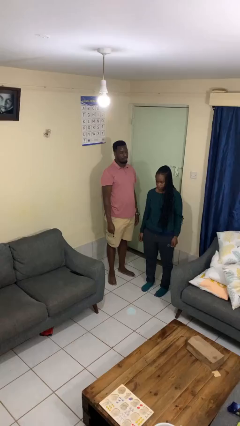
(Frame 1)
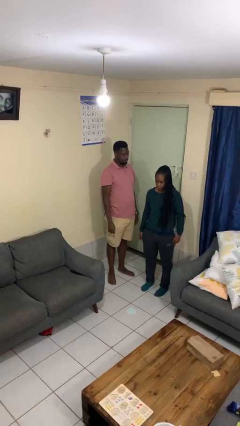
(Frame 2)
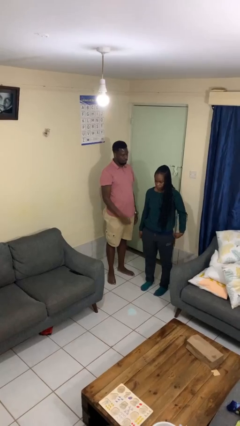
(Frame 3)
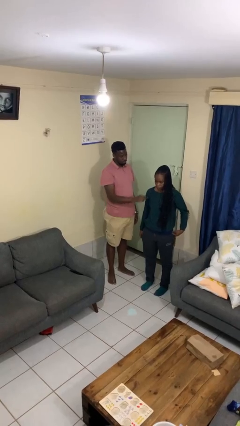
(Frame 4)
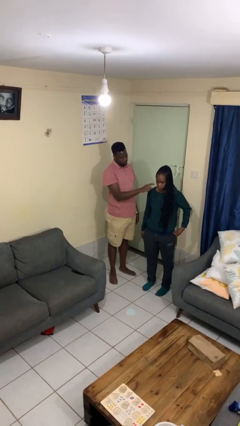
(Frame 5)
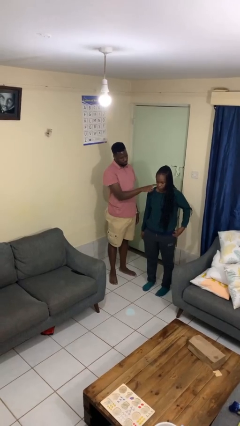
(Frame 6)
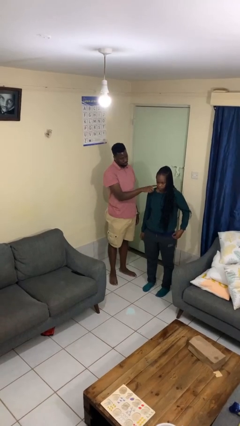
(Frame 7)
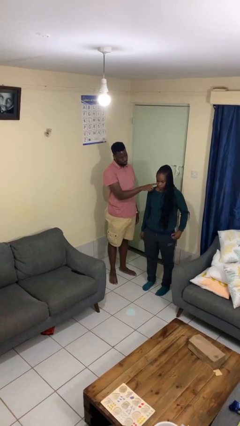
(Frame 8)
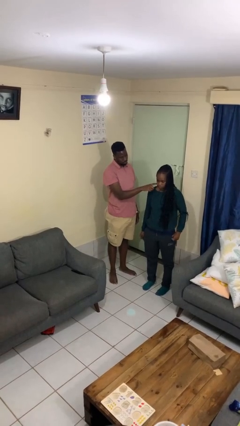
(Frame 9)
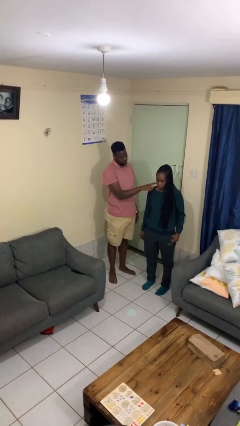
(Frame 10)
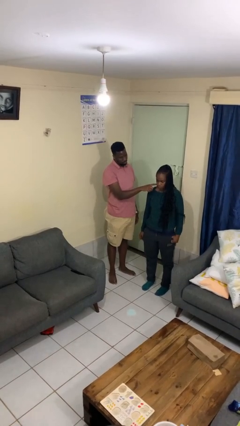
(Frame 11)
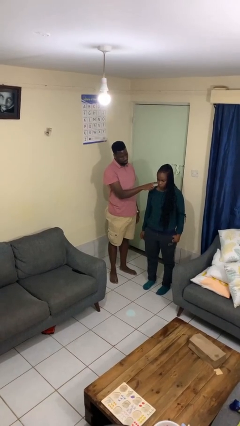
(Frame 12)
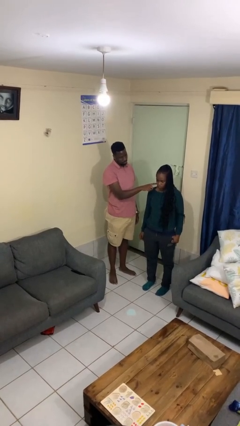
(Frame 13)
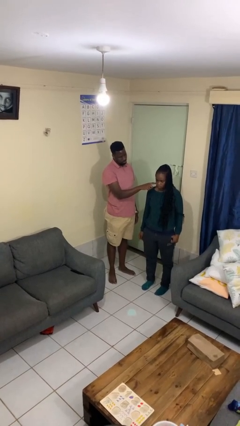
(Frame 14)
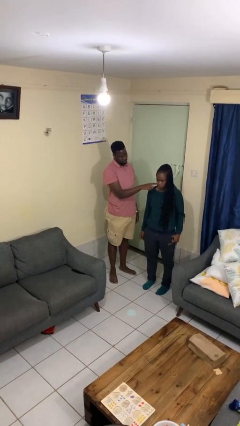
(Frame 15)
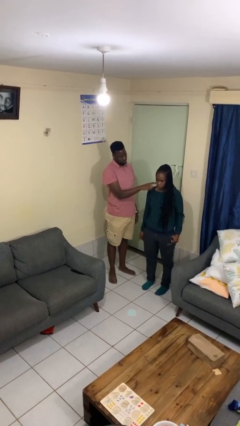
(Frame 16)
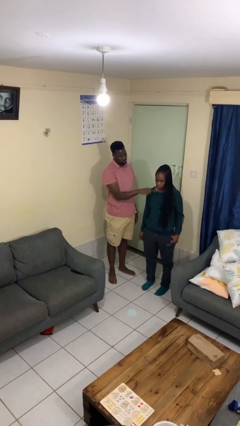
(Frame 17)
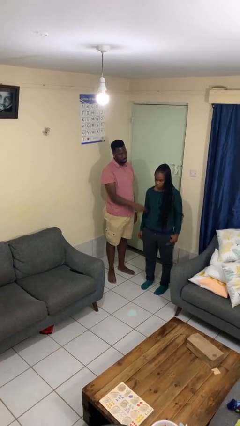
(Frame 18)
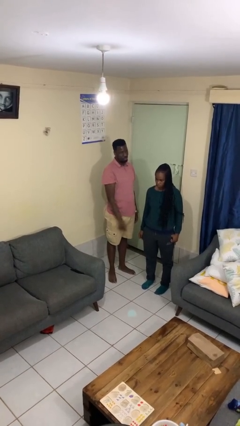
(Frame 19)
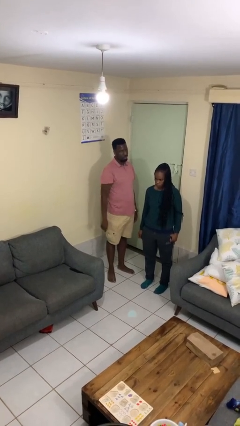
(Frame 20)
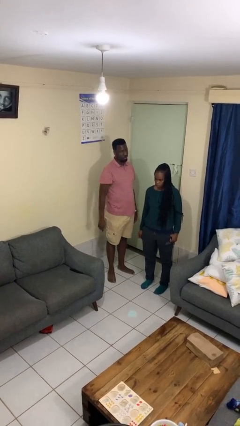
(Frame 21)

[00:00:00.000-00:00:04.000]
person touches face of person

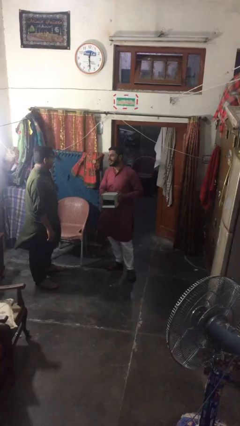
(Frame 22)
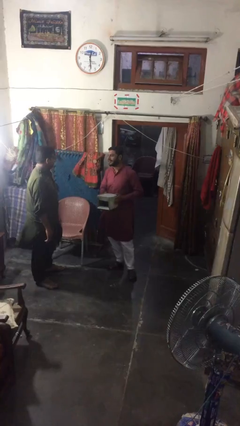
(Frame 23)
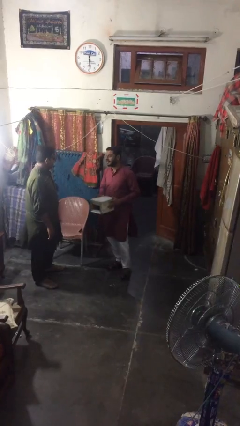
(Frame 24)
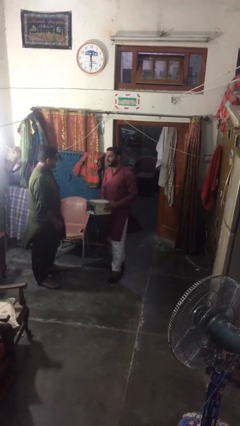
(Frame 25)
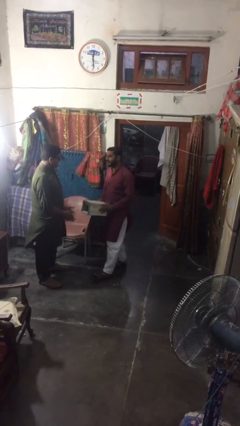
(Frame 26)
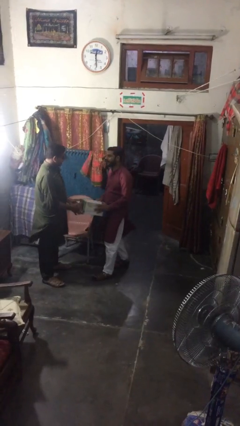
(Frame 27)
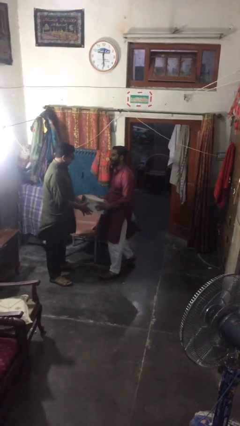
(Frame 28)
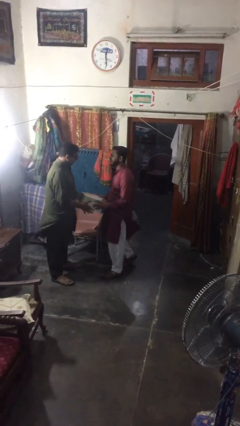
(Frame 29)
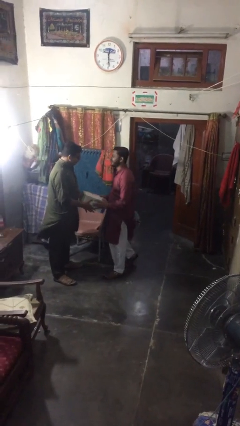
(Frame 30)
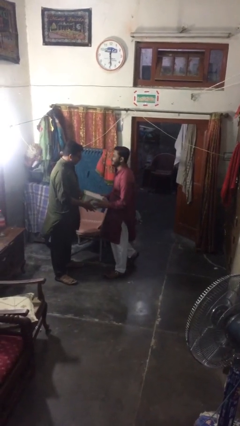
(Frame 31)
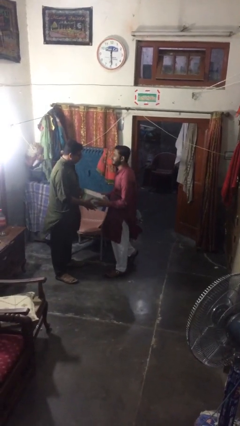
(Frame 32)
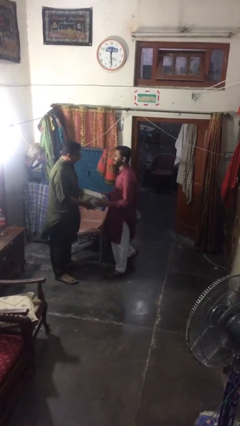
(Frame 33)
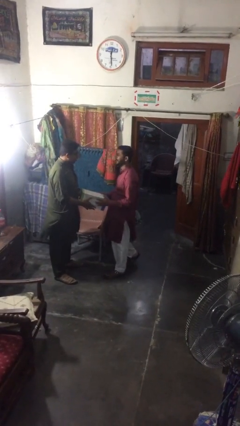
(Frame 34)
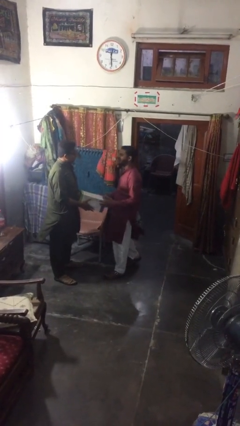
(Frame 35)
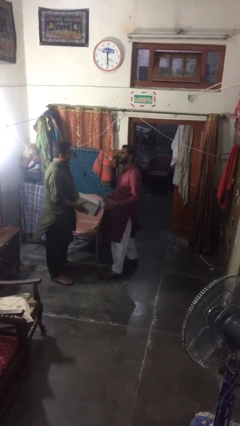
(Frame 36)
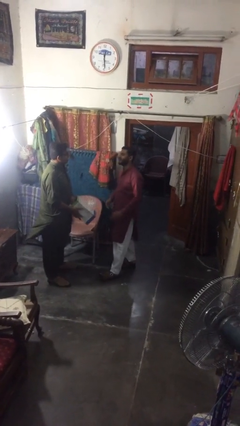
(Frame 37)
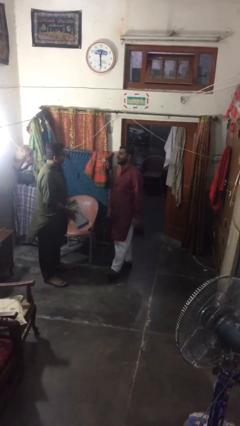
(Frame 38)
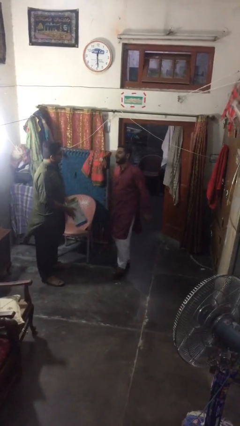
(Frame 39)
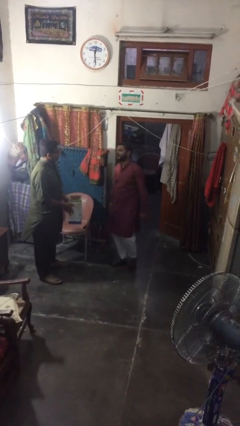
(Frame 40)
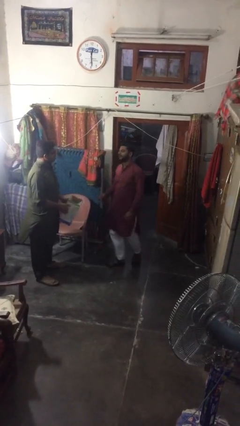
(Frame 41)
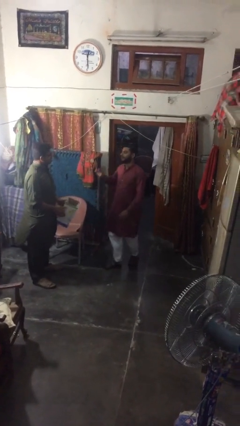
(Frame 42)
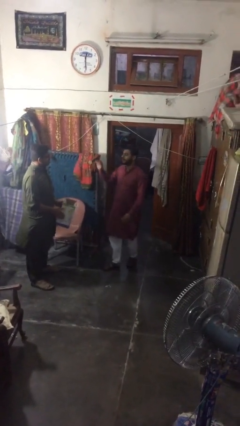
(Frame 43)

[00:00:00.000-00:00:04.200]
person transfers object to person

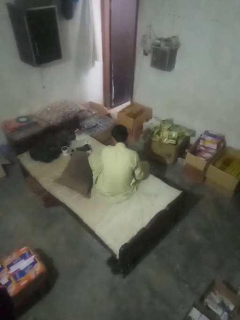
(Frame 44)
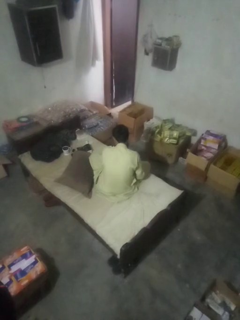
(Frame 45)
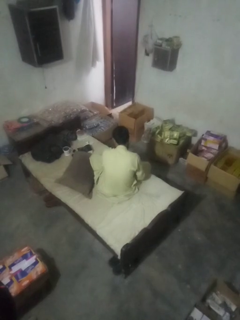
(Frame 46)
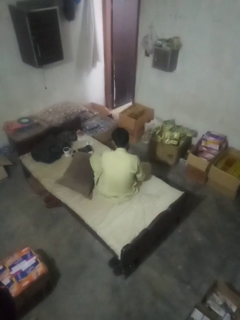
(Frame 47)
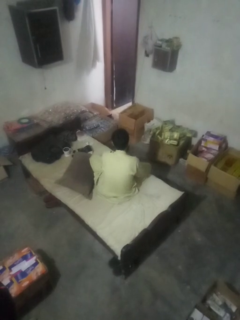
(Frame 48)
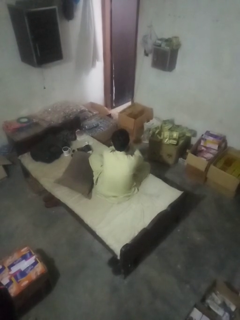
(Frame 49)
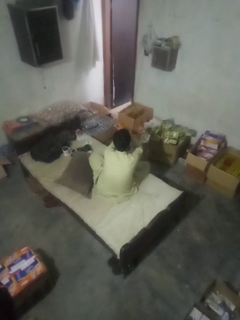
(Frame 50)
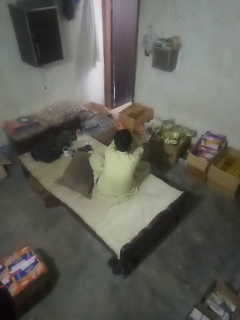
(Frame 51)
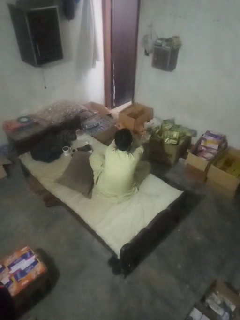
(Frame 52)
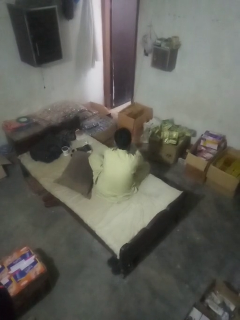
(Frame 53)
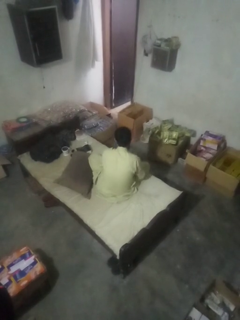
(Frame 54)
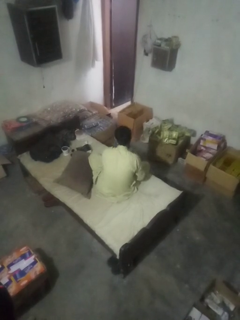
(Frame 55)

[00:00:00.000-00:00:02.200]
person gestures arms x

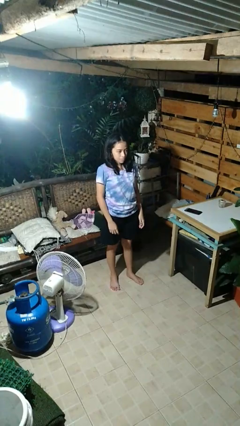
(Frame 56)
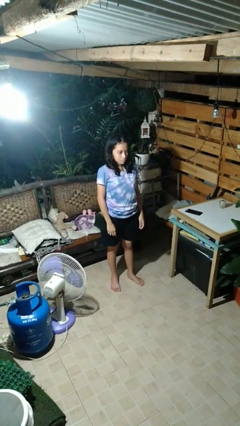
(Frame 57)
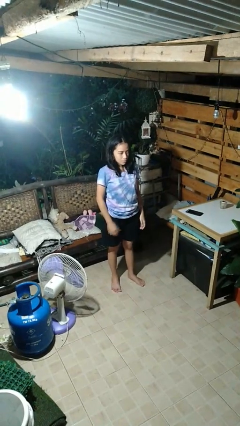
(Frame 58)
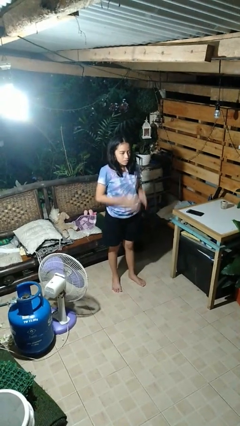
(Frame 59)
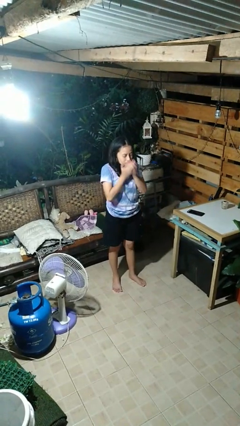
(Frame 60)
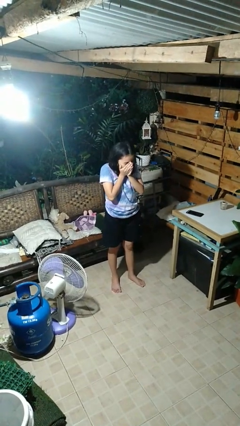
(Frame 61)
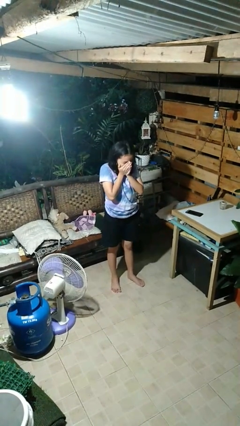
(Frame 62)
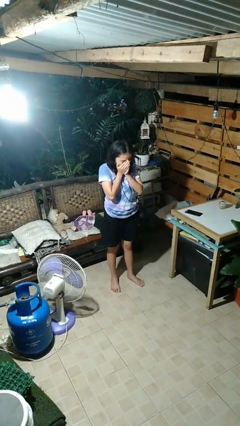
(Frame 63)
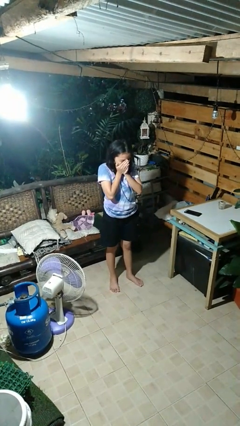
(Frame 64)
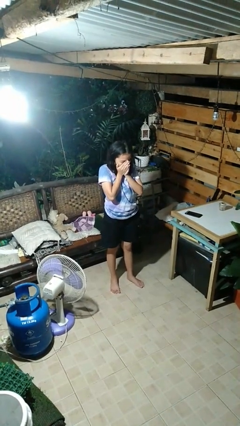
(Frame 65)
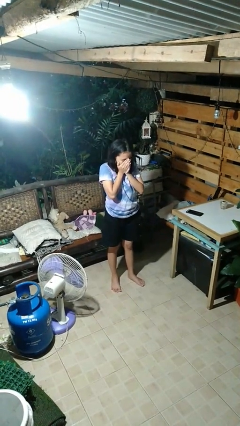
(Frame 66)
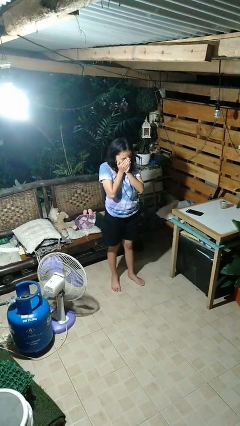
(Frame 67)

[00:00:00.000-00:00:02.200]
person sneezes into hand

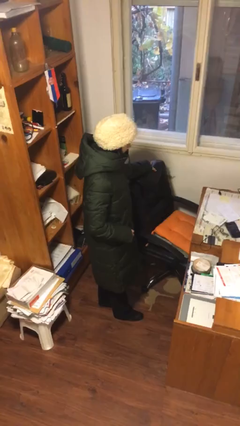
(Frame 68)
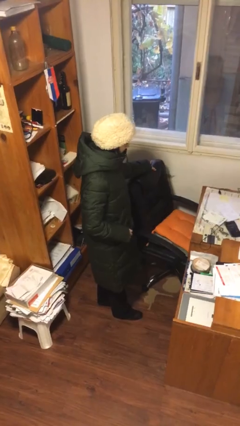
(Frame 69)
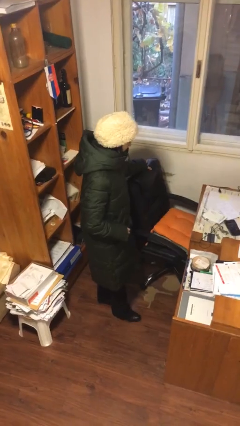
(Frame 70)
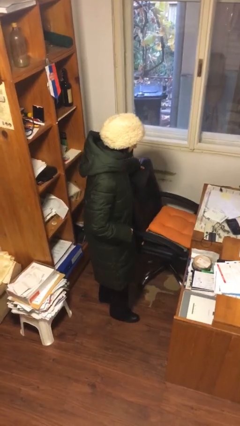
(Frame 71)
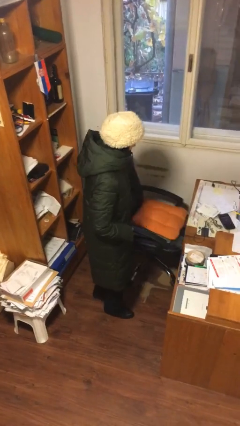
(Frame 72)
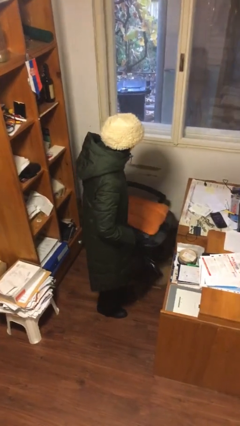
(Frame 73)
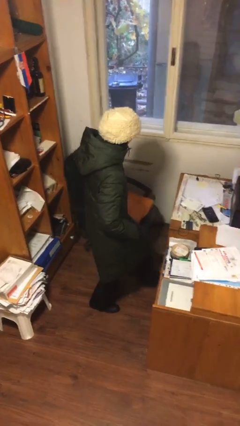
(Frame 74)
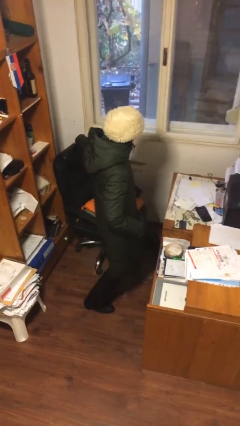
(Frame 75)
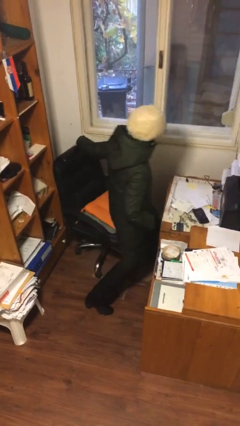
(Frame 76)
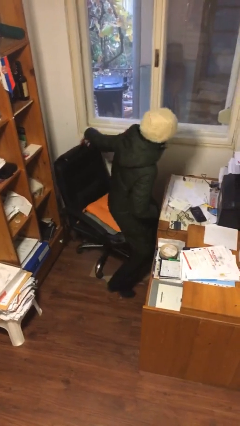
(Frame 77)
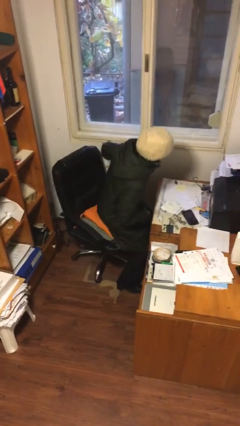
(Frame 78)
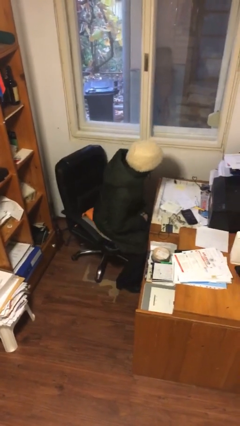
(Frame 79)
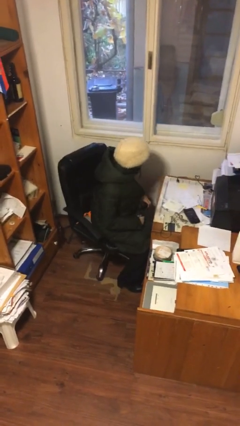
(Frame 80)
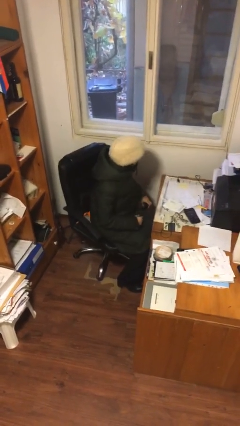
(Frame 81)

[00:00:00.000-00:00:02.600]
person sits down

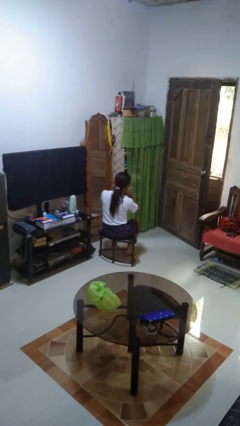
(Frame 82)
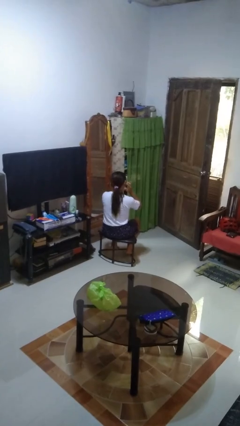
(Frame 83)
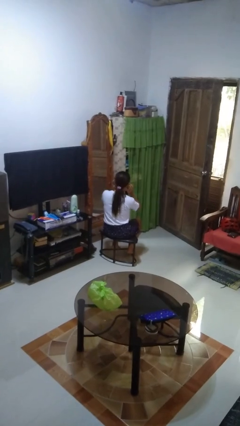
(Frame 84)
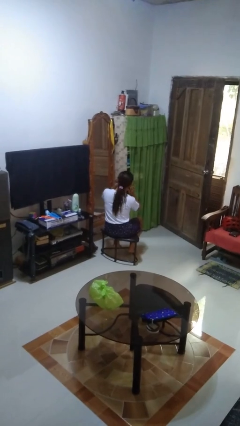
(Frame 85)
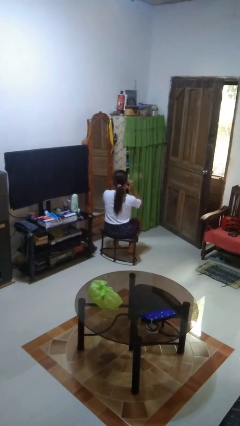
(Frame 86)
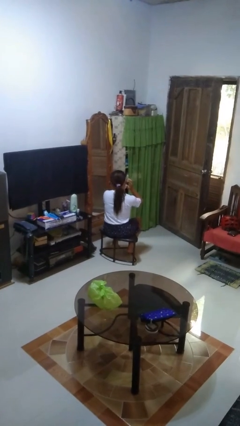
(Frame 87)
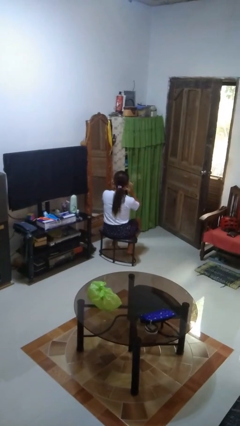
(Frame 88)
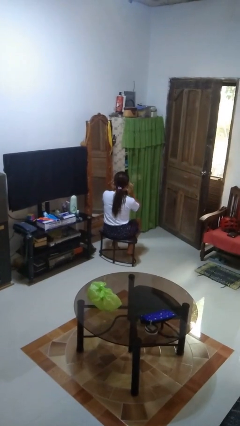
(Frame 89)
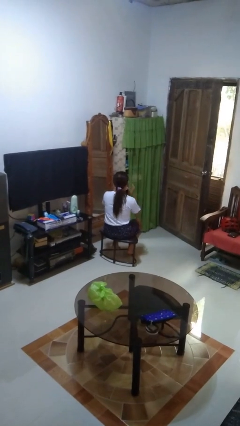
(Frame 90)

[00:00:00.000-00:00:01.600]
person puts fingers in ear

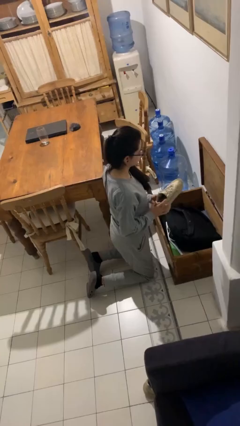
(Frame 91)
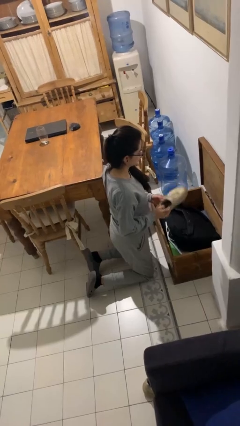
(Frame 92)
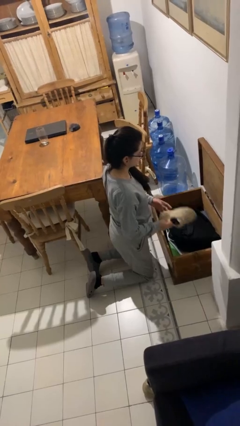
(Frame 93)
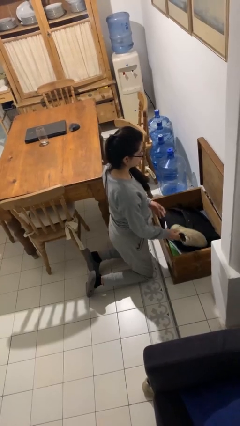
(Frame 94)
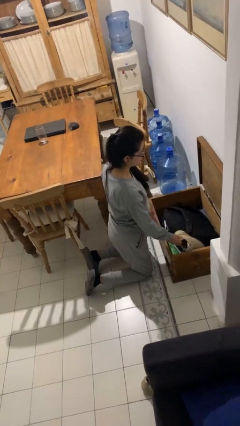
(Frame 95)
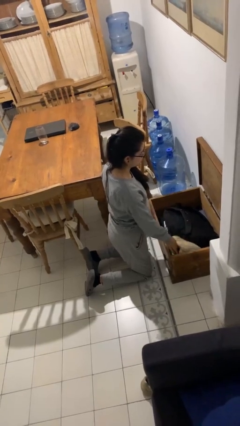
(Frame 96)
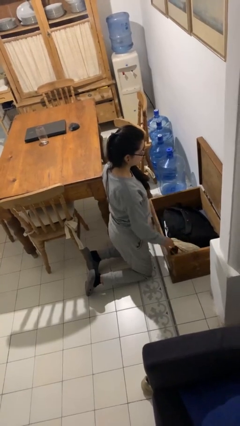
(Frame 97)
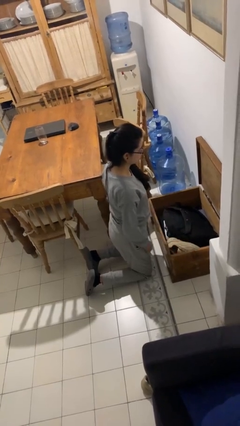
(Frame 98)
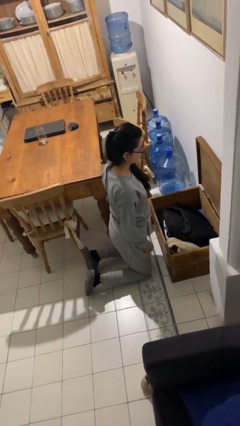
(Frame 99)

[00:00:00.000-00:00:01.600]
person puts object into box
